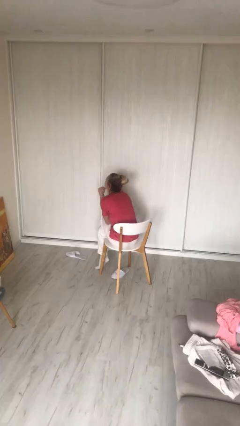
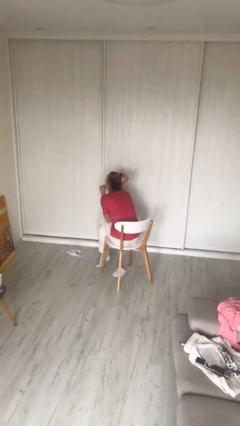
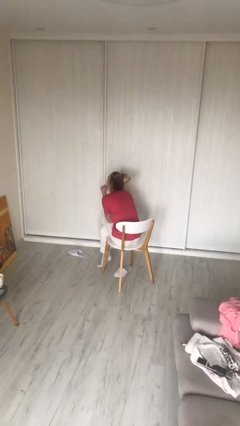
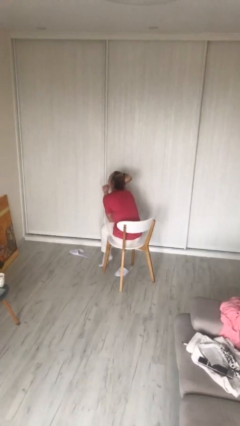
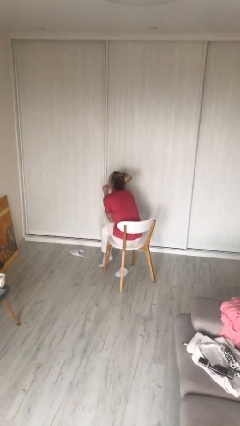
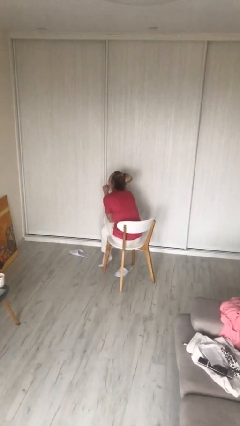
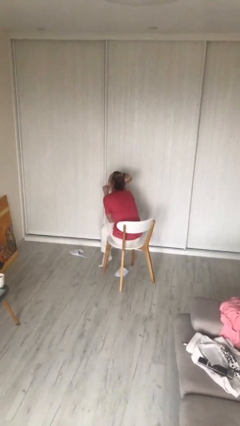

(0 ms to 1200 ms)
person strokes chin

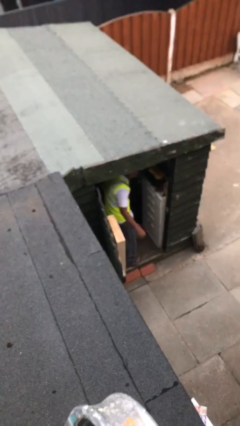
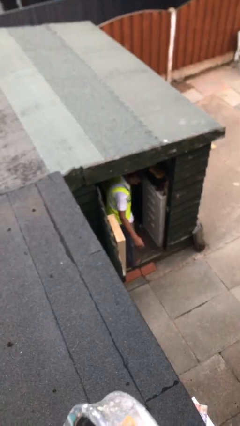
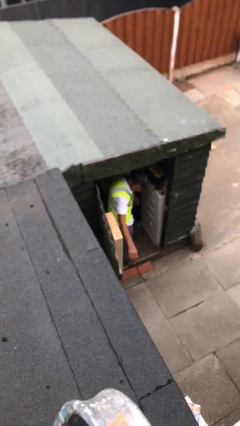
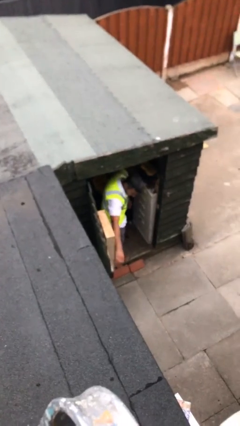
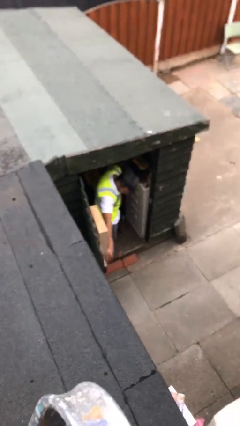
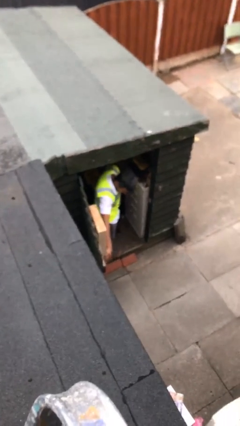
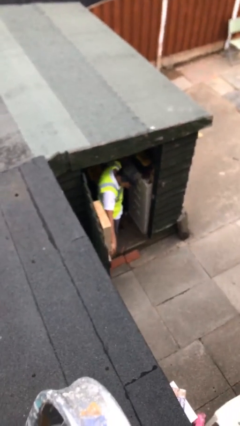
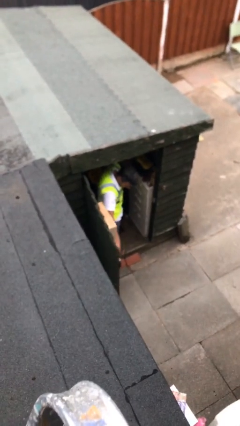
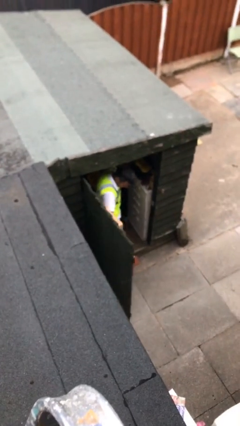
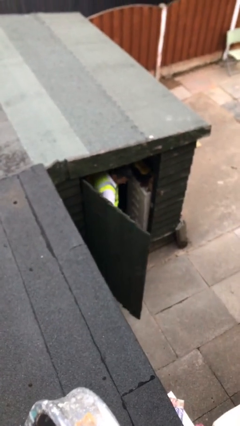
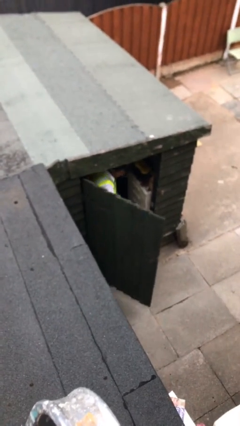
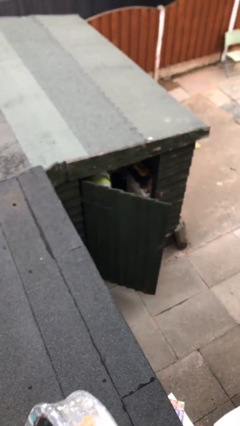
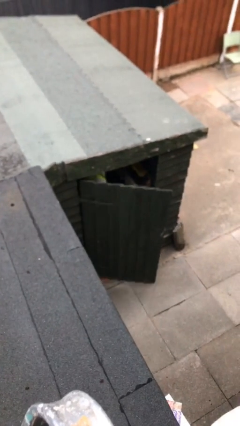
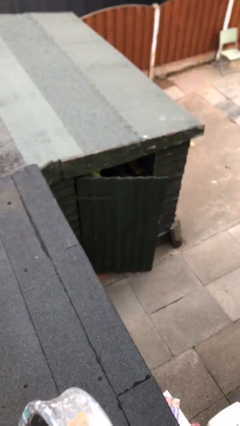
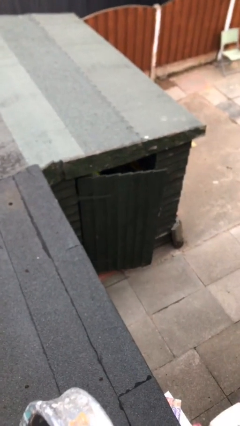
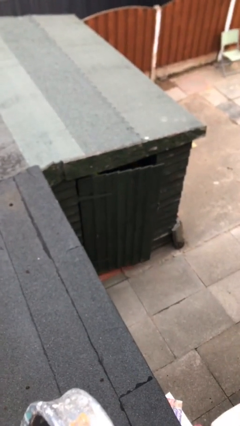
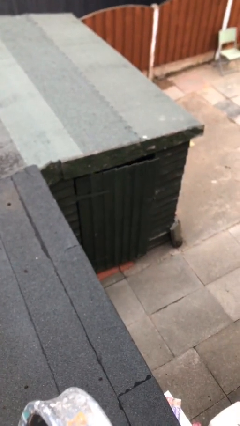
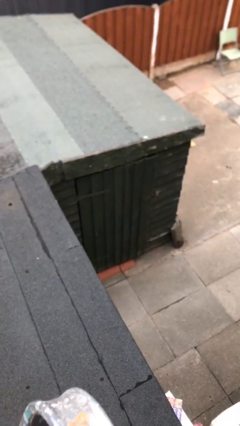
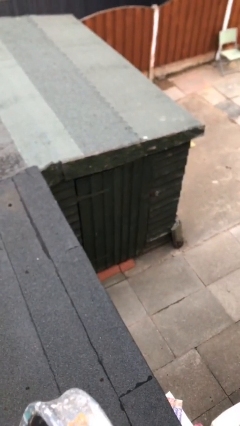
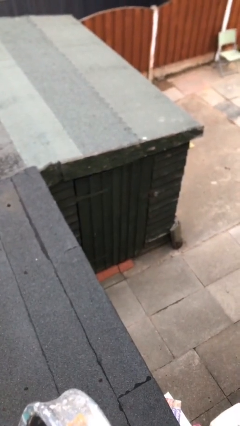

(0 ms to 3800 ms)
person closes facility door

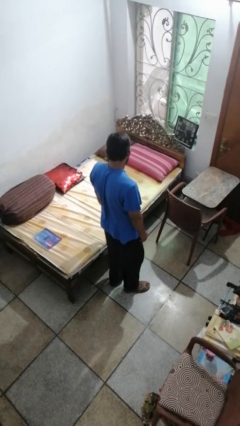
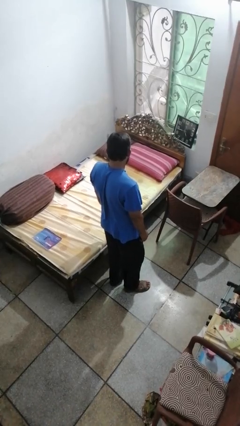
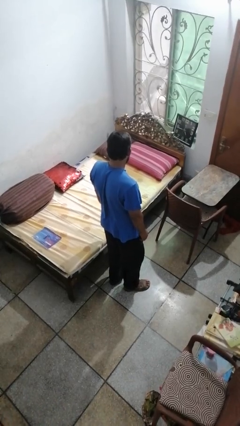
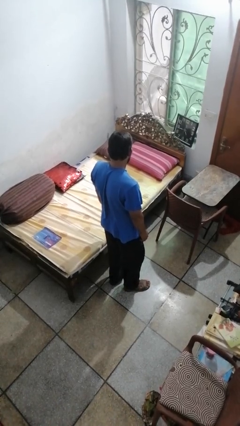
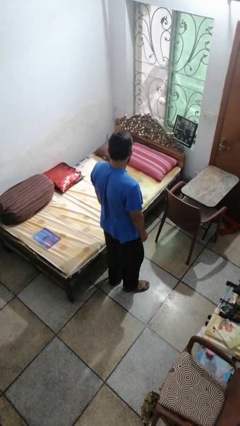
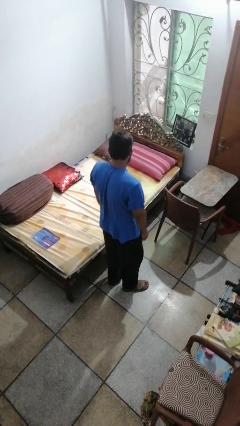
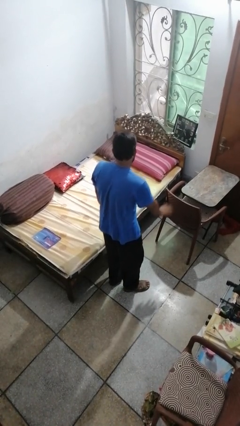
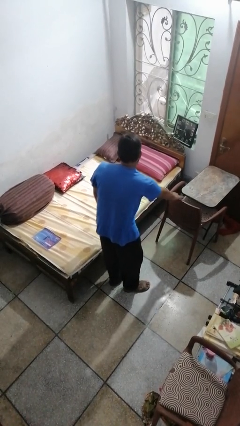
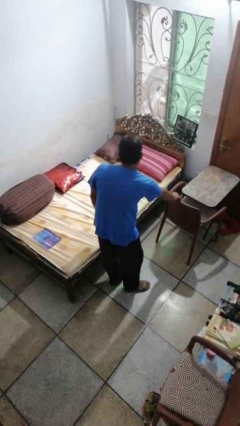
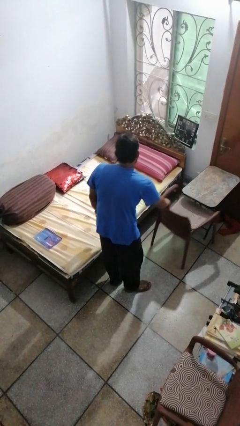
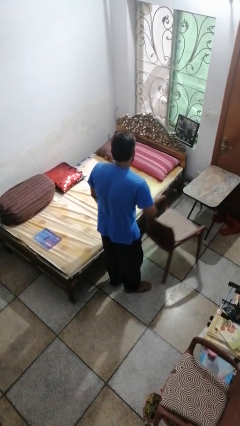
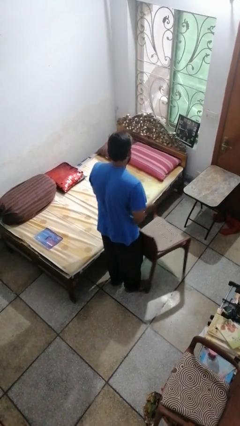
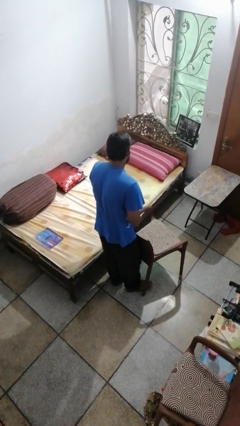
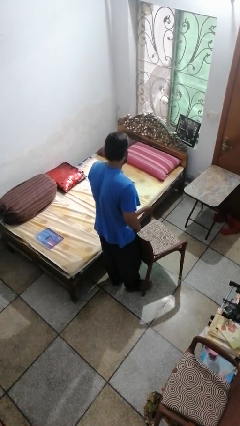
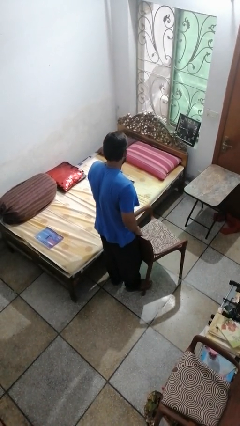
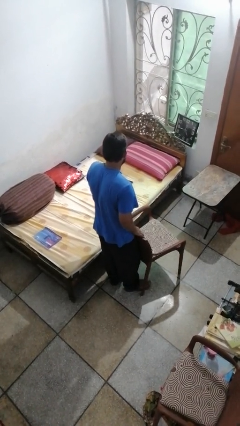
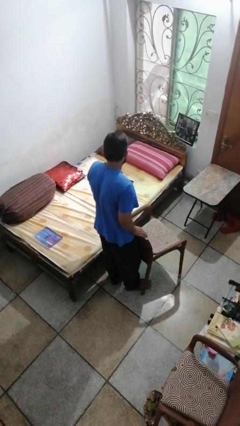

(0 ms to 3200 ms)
person pulls out chair

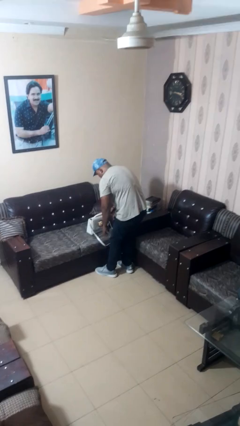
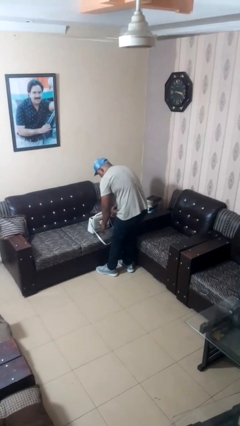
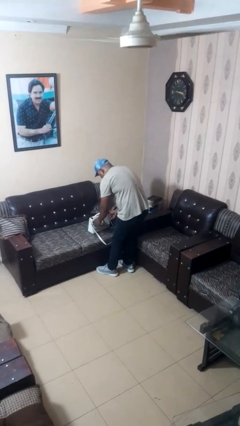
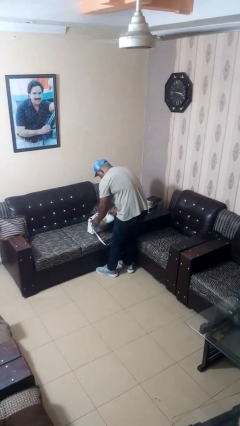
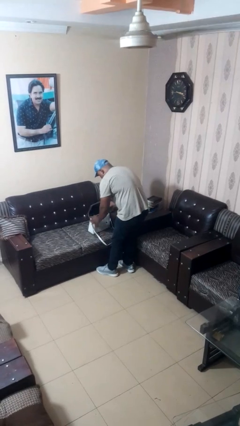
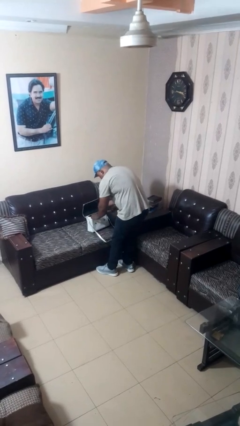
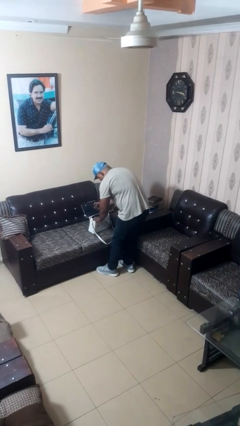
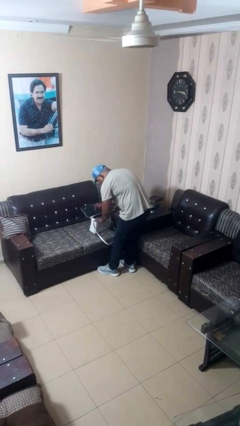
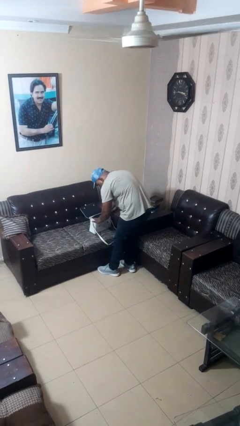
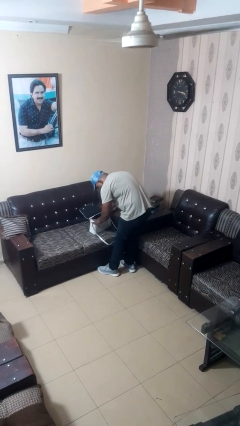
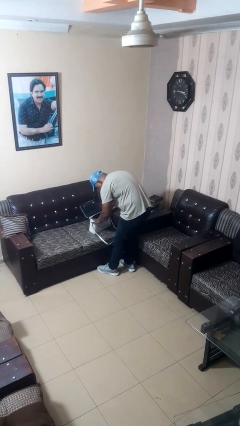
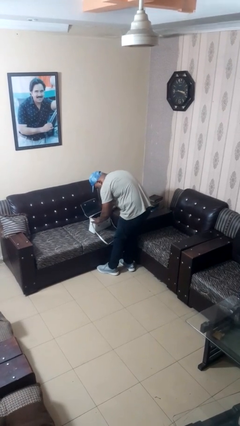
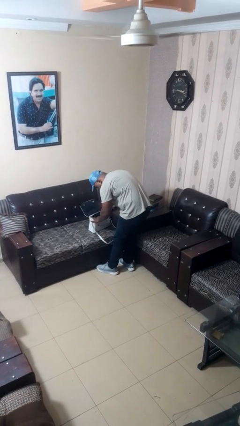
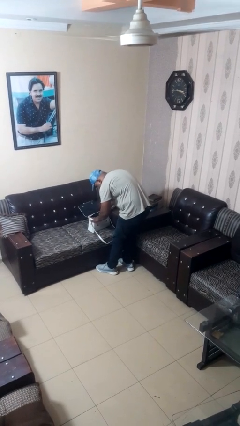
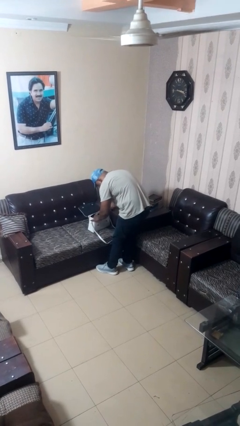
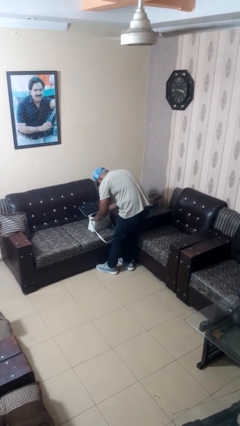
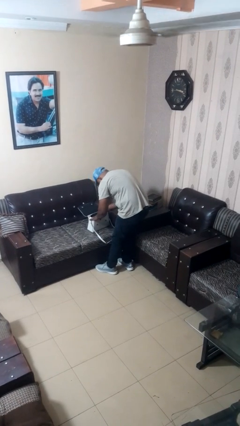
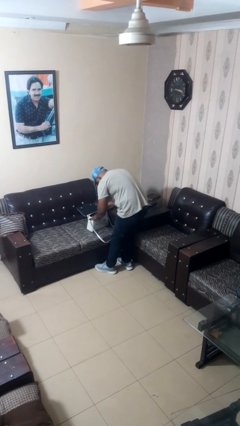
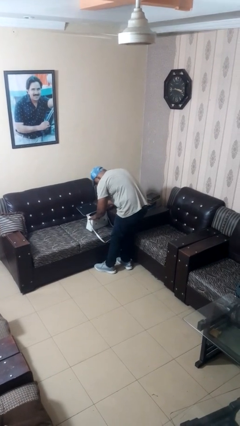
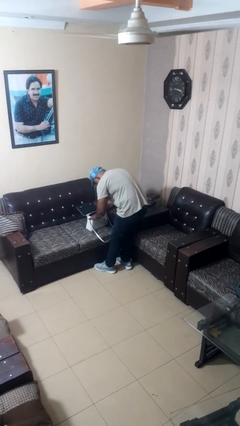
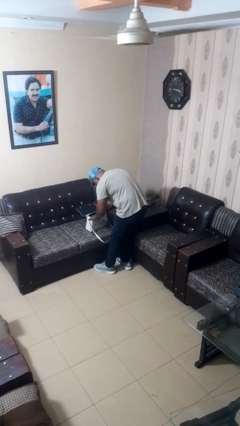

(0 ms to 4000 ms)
person searches in purse

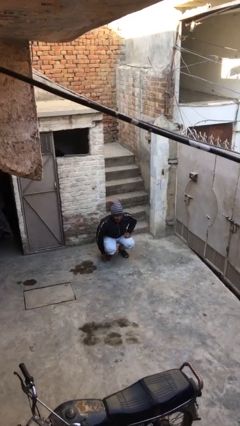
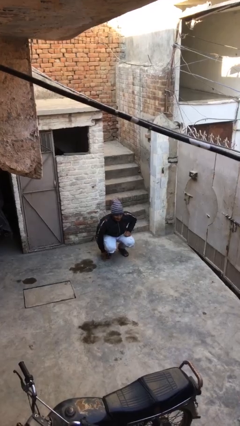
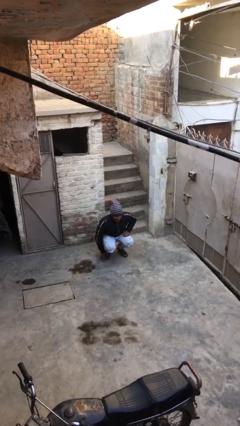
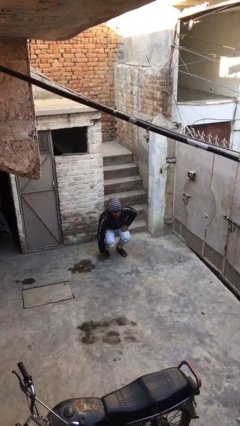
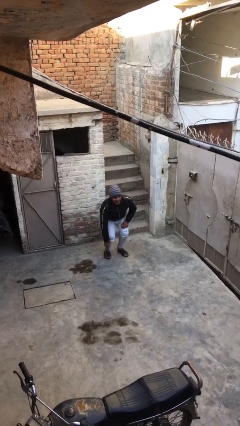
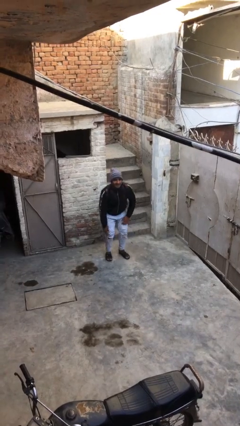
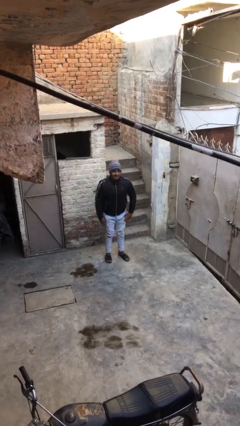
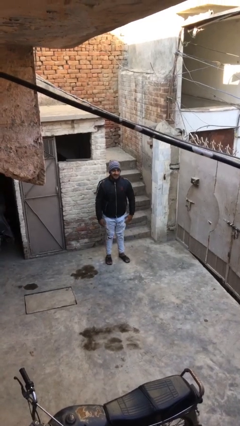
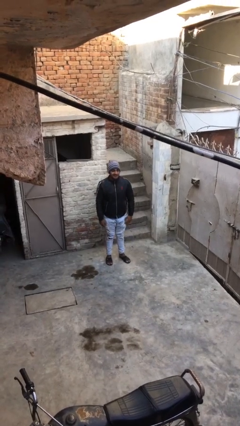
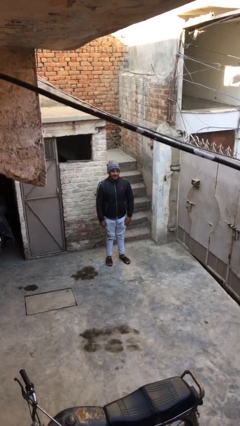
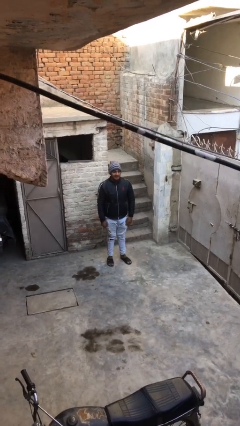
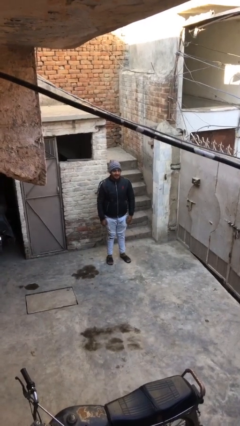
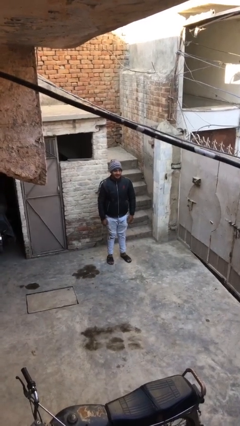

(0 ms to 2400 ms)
person stands up

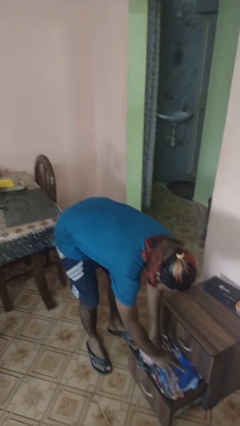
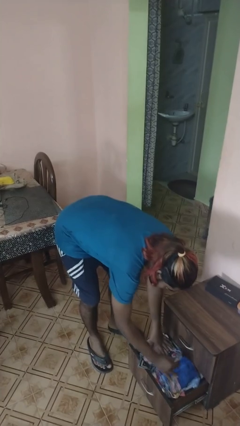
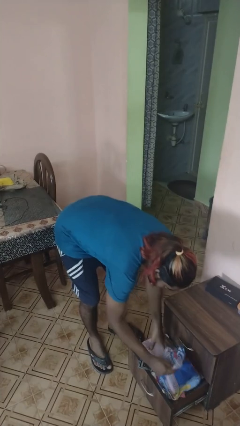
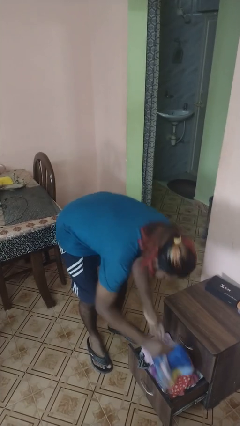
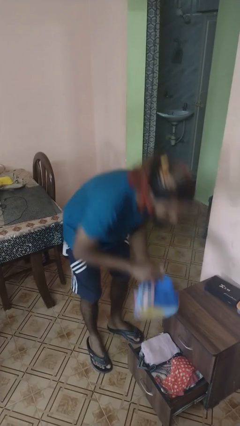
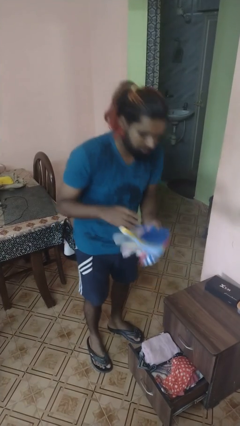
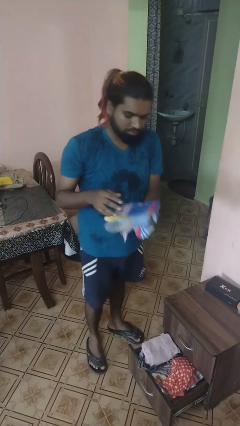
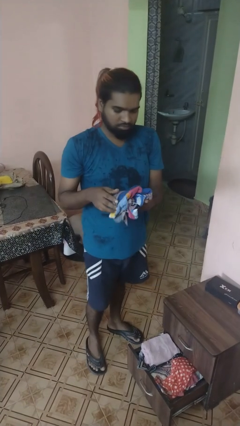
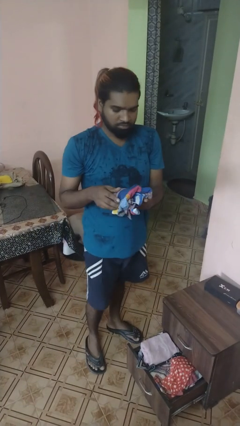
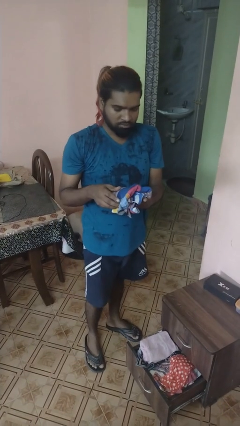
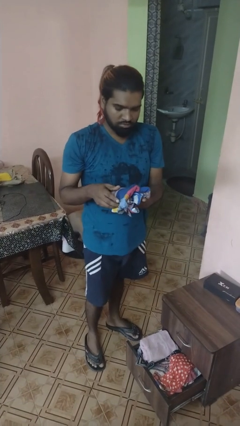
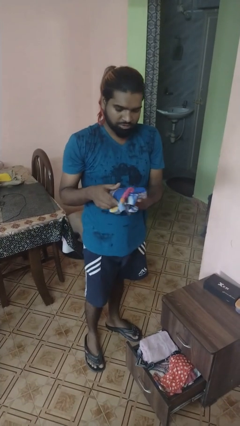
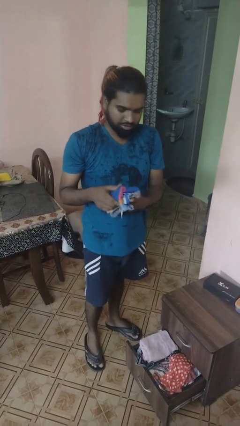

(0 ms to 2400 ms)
person takes clothes from dresser
